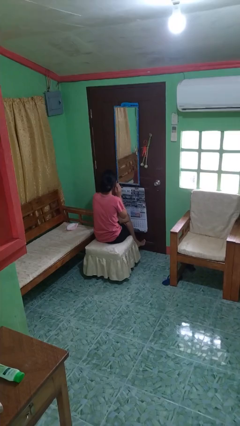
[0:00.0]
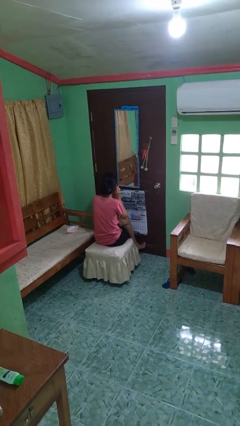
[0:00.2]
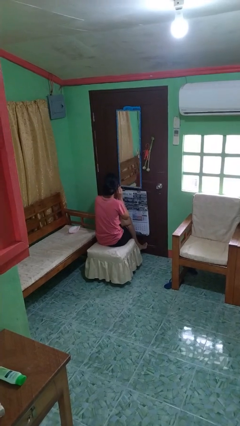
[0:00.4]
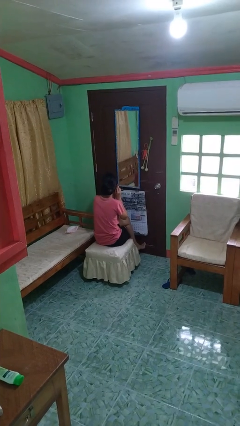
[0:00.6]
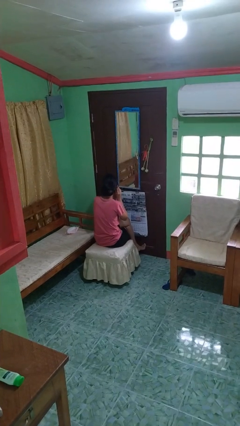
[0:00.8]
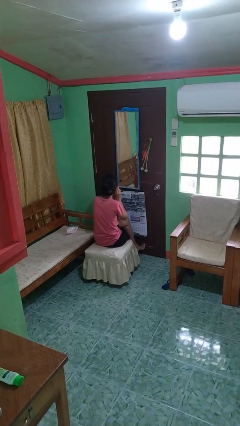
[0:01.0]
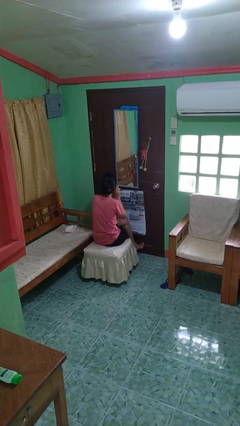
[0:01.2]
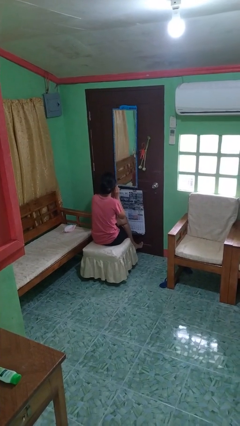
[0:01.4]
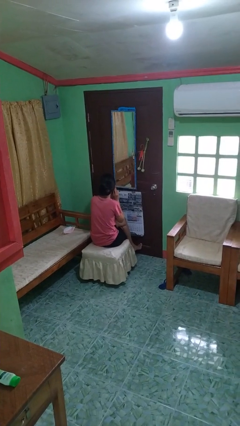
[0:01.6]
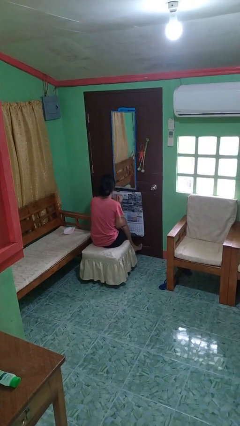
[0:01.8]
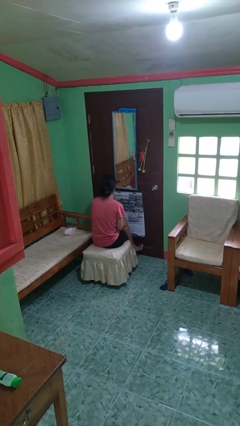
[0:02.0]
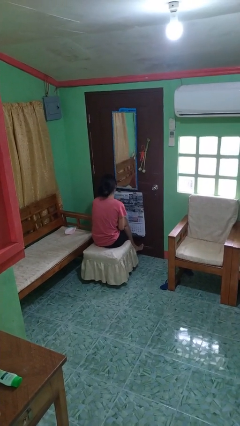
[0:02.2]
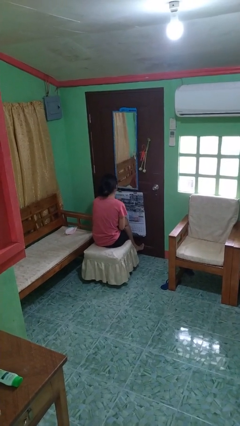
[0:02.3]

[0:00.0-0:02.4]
person takes off earrings

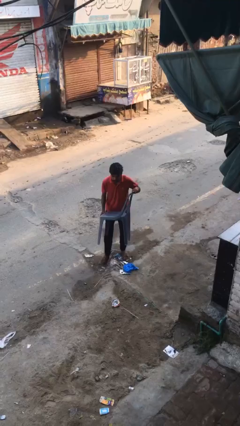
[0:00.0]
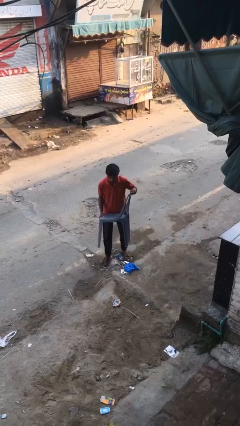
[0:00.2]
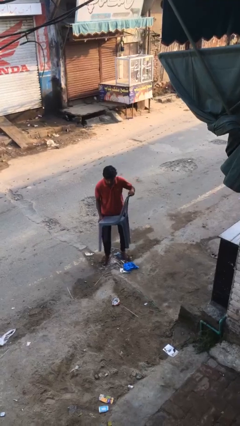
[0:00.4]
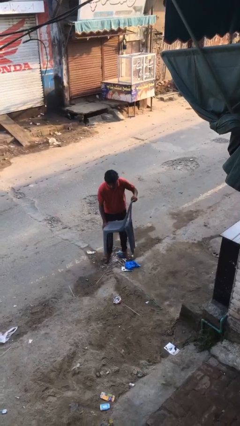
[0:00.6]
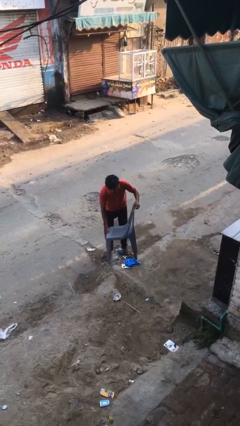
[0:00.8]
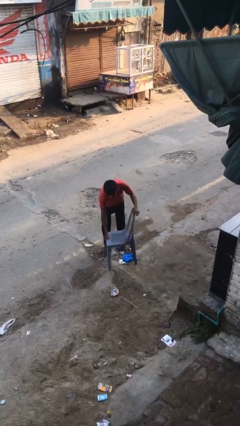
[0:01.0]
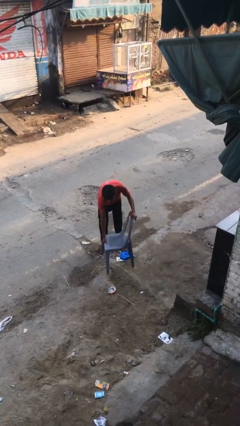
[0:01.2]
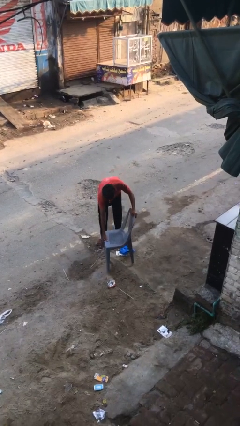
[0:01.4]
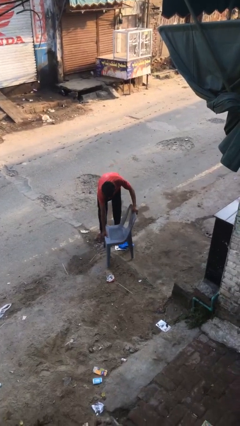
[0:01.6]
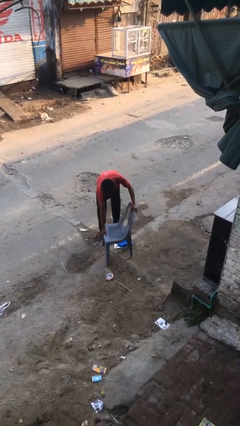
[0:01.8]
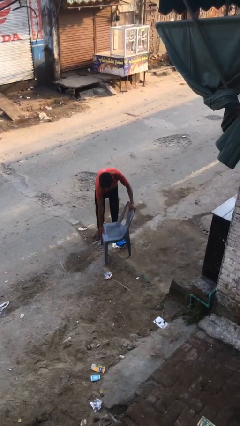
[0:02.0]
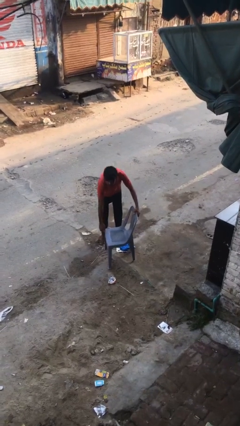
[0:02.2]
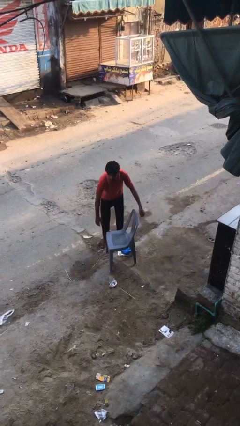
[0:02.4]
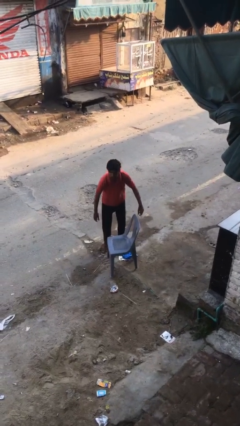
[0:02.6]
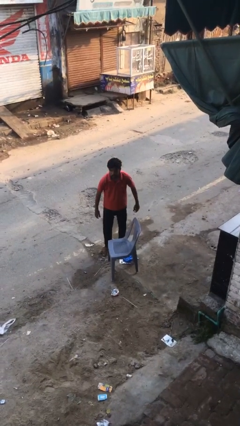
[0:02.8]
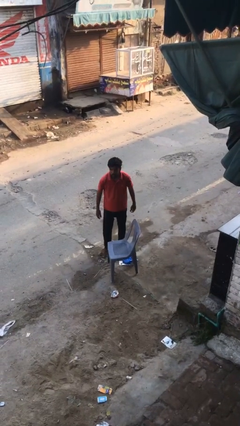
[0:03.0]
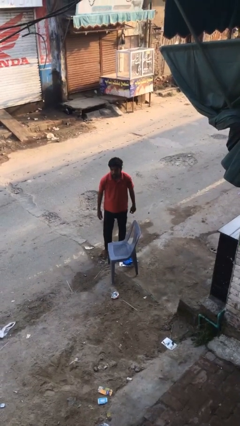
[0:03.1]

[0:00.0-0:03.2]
person puts down object on floor

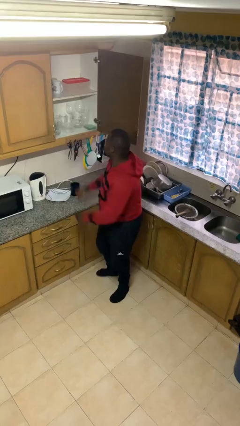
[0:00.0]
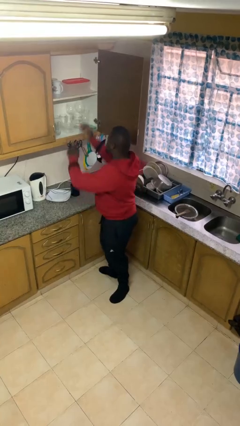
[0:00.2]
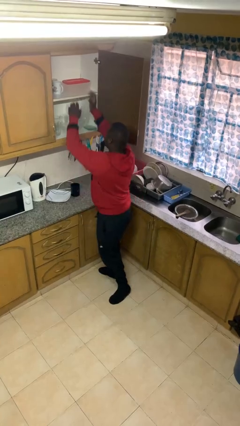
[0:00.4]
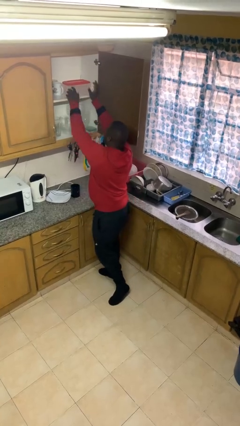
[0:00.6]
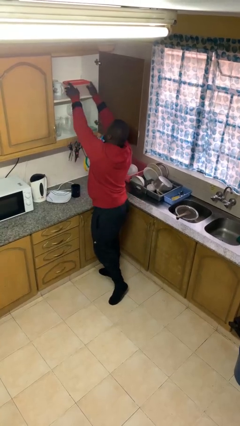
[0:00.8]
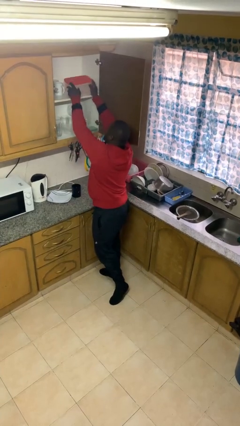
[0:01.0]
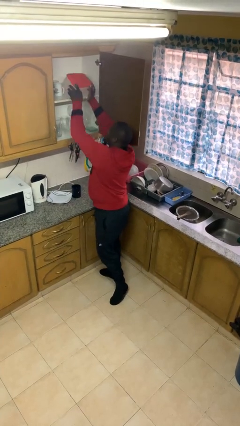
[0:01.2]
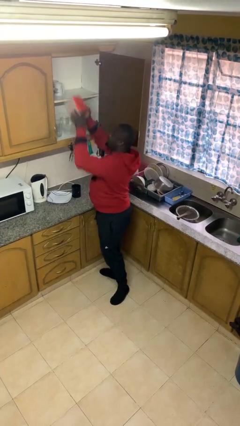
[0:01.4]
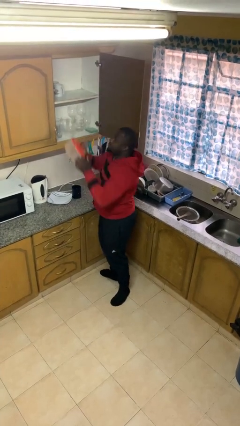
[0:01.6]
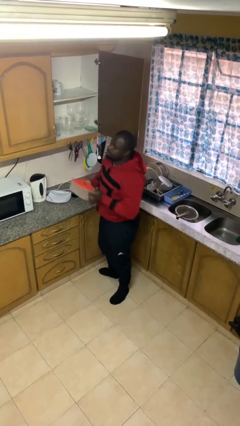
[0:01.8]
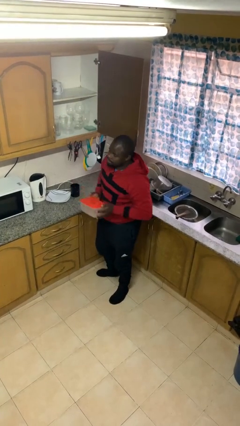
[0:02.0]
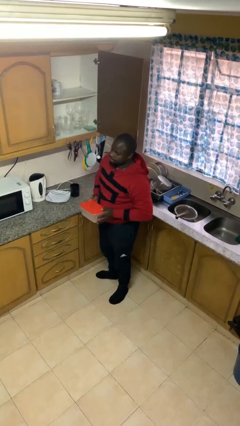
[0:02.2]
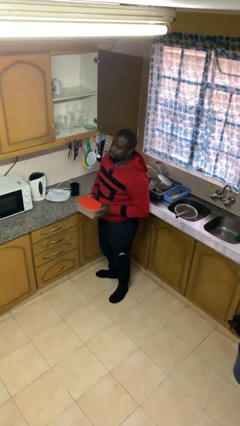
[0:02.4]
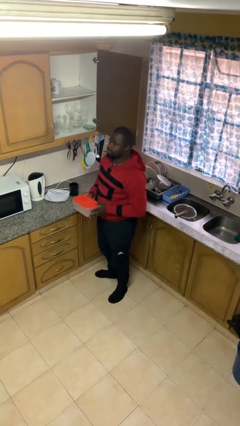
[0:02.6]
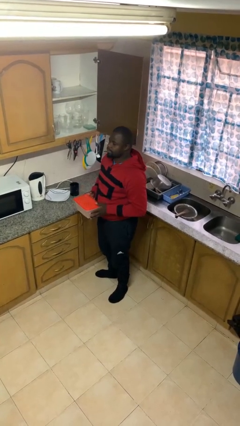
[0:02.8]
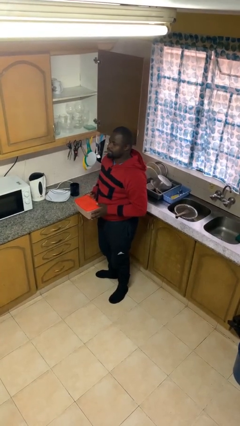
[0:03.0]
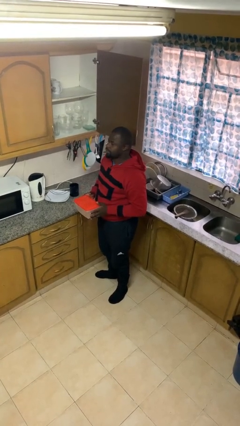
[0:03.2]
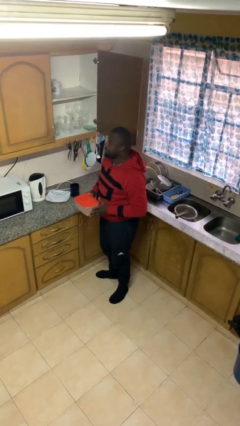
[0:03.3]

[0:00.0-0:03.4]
person picks up object from cabinet

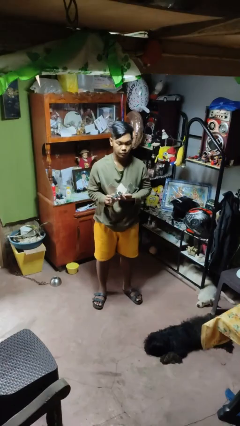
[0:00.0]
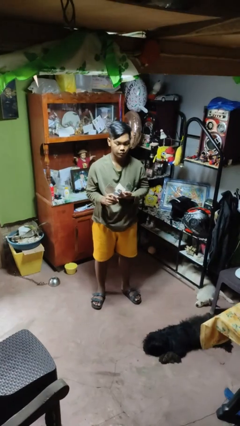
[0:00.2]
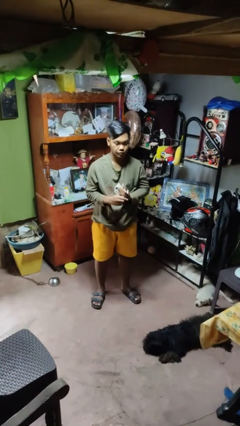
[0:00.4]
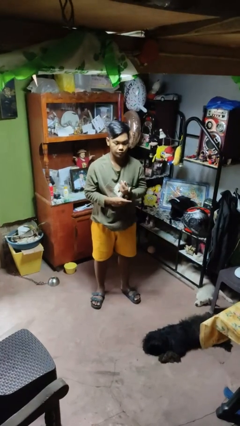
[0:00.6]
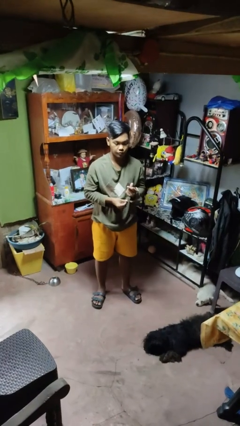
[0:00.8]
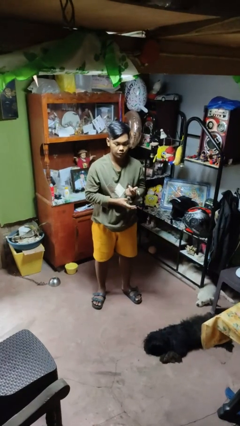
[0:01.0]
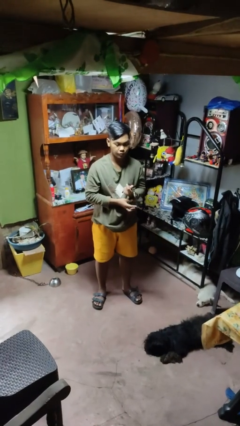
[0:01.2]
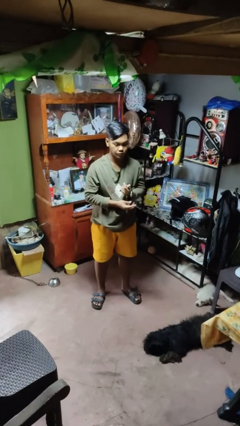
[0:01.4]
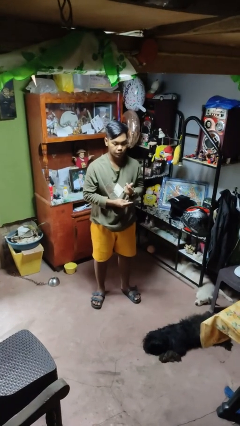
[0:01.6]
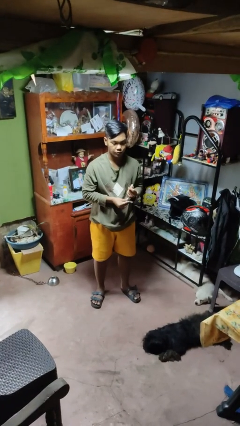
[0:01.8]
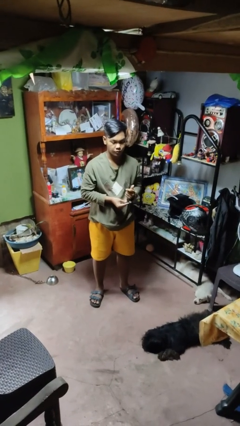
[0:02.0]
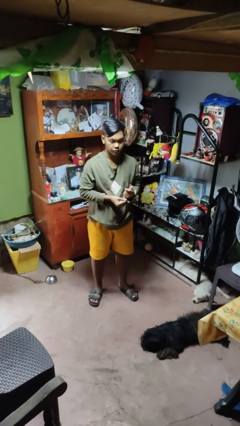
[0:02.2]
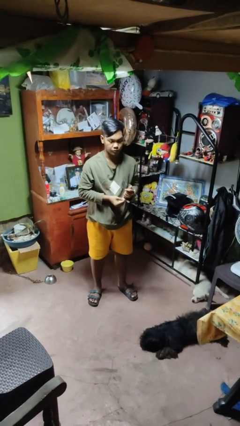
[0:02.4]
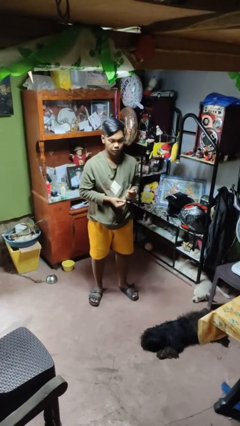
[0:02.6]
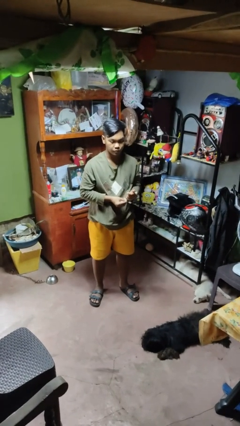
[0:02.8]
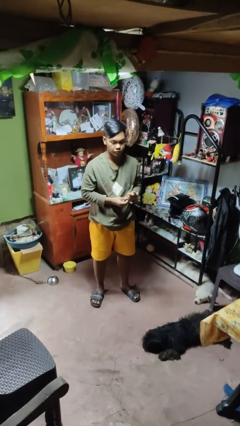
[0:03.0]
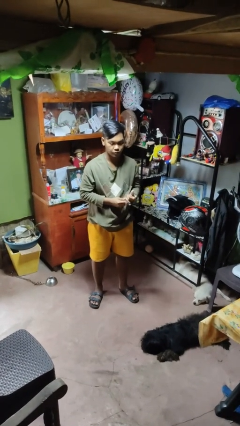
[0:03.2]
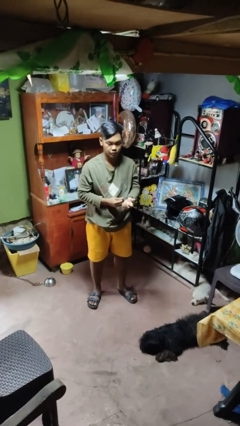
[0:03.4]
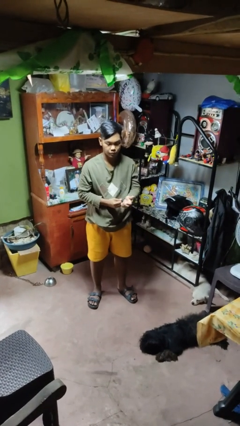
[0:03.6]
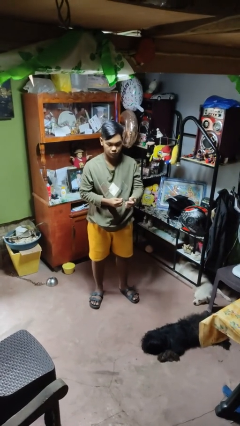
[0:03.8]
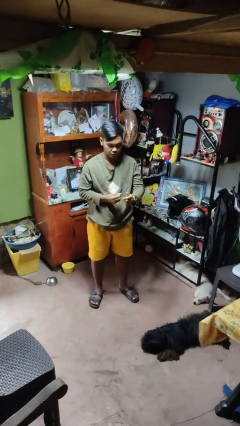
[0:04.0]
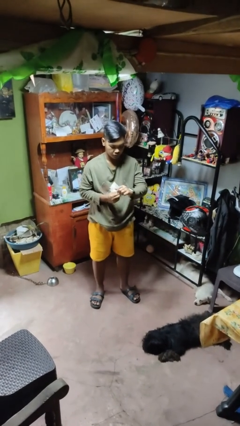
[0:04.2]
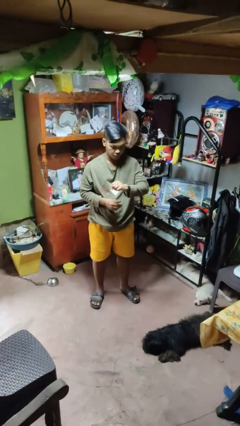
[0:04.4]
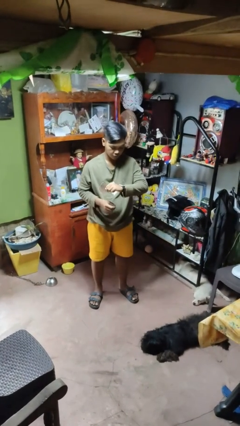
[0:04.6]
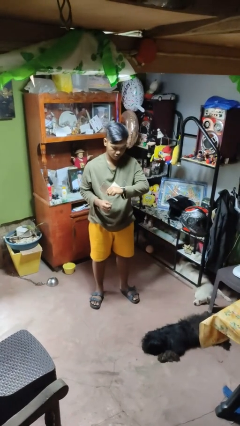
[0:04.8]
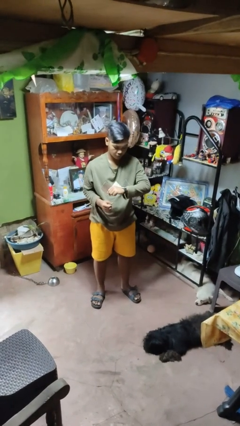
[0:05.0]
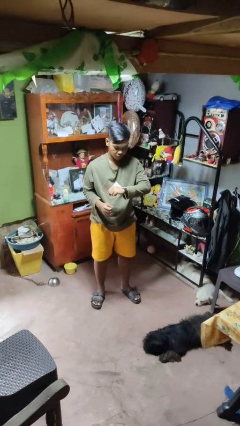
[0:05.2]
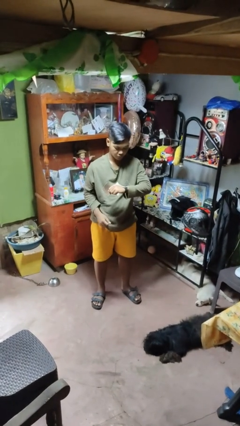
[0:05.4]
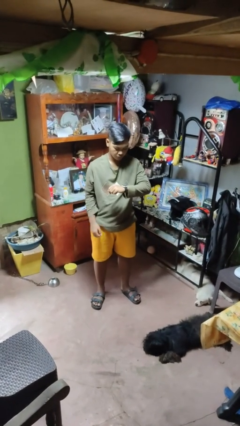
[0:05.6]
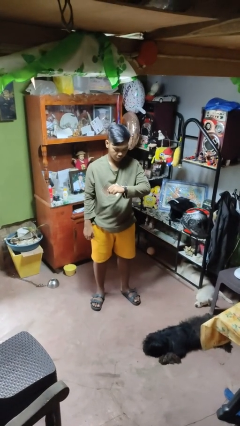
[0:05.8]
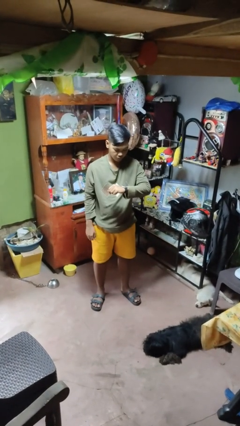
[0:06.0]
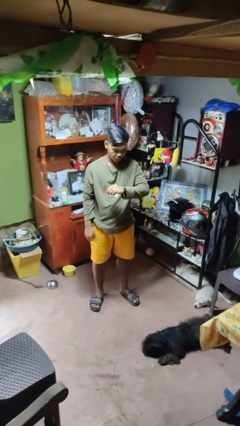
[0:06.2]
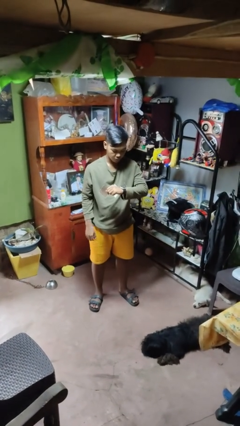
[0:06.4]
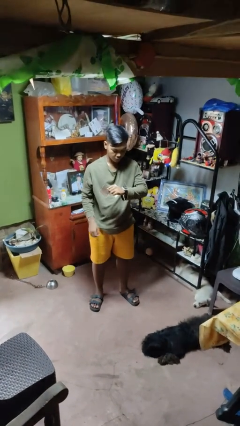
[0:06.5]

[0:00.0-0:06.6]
person puts on wristwatch

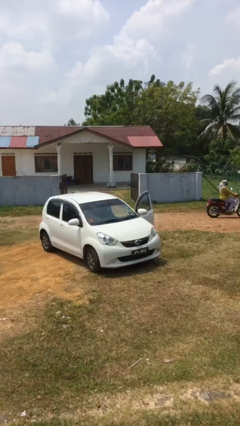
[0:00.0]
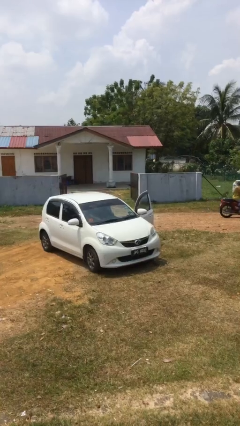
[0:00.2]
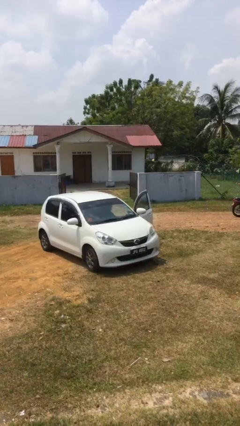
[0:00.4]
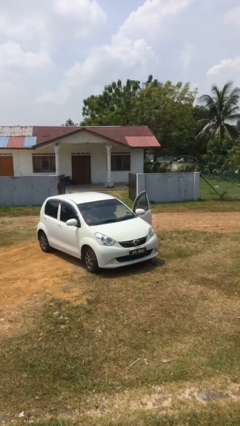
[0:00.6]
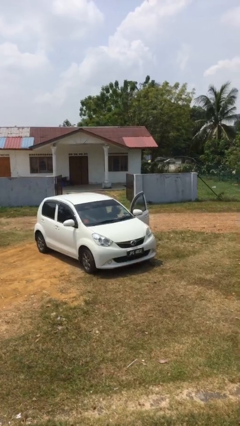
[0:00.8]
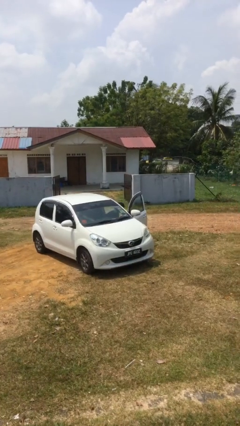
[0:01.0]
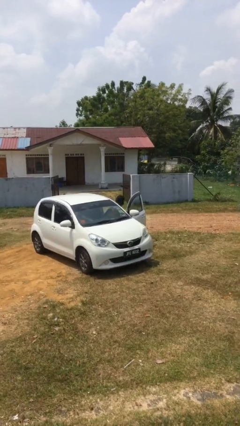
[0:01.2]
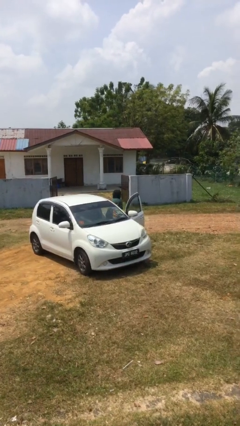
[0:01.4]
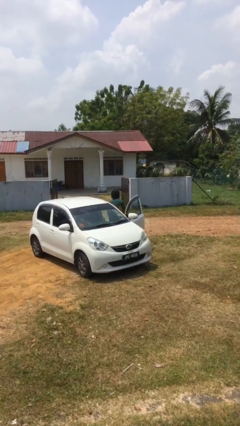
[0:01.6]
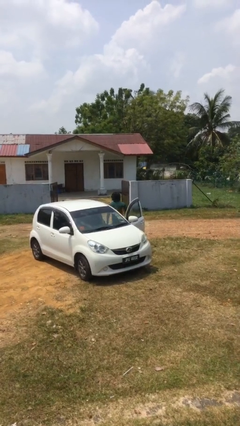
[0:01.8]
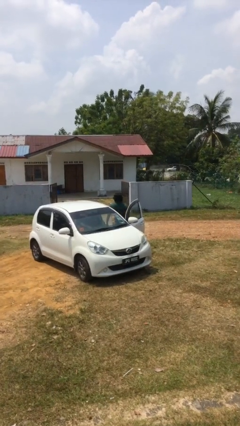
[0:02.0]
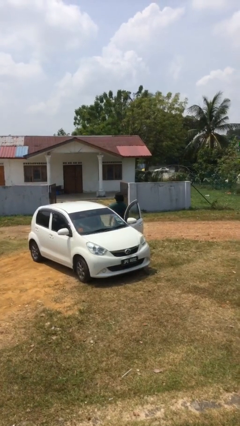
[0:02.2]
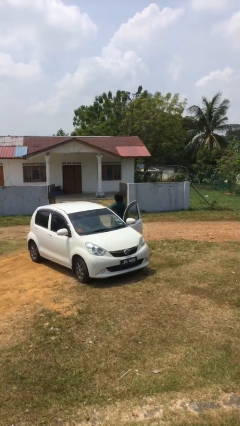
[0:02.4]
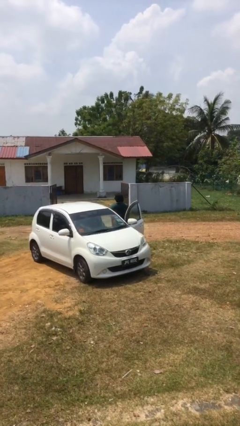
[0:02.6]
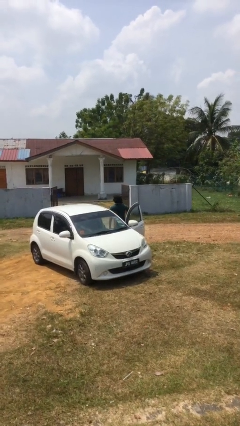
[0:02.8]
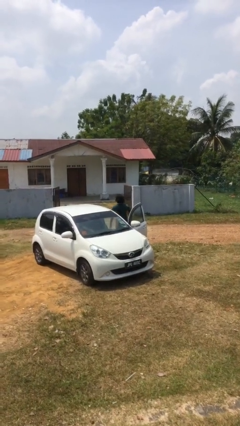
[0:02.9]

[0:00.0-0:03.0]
person exits car
